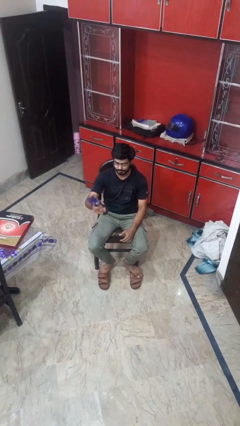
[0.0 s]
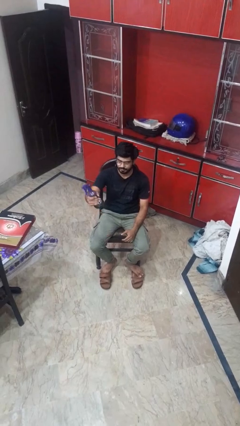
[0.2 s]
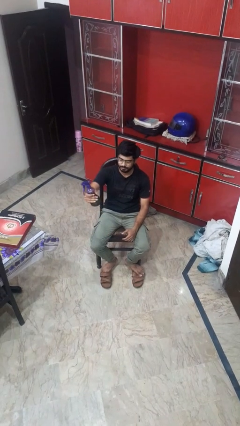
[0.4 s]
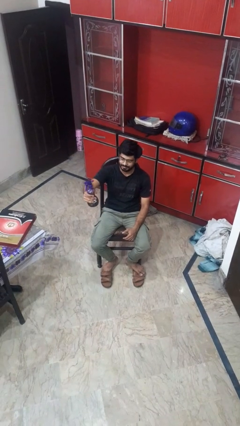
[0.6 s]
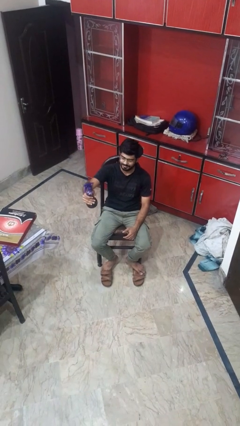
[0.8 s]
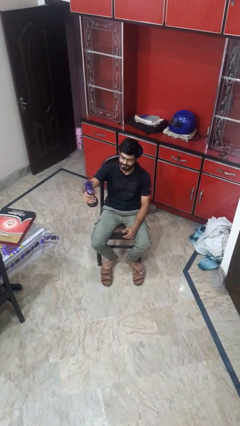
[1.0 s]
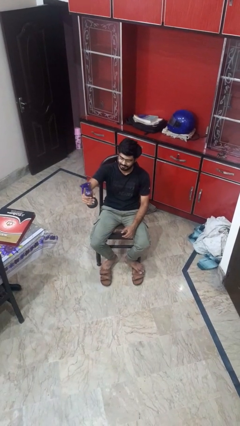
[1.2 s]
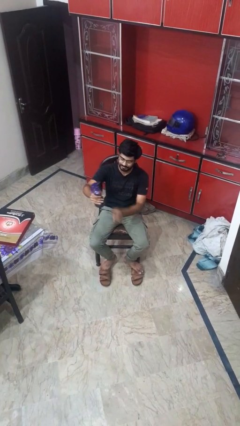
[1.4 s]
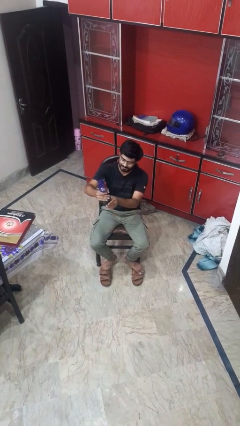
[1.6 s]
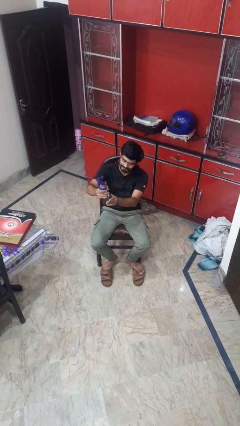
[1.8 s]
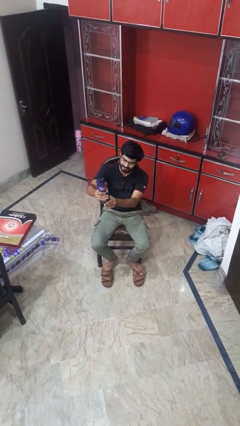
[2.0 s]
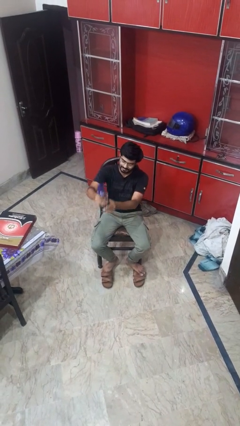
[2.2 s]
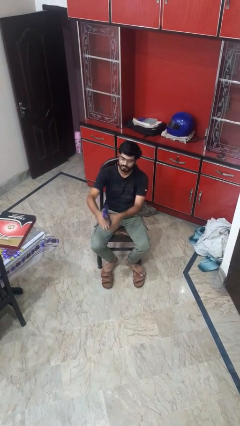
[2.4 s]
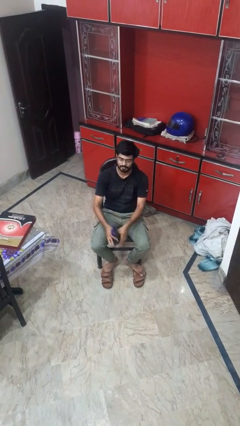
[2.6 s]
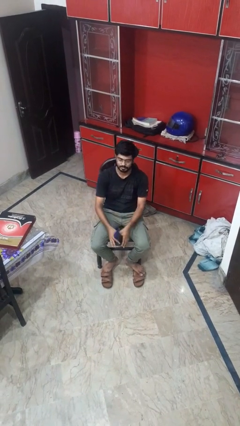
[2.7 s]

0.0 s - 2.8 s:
person squeezes object

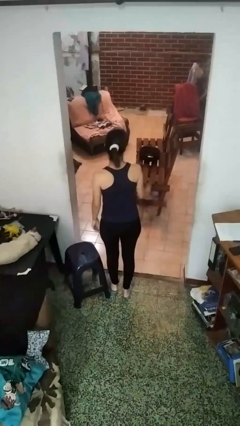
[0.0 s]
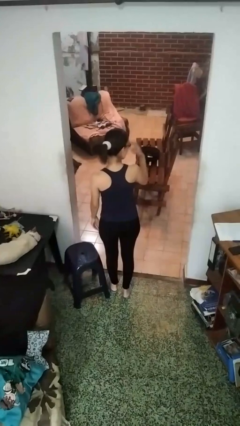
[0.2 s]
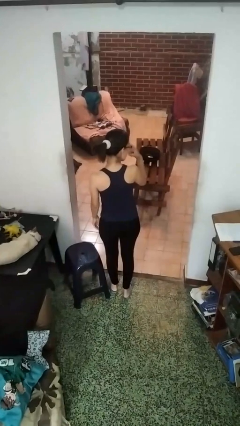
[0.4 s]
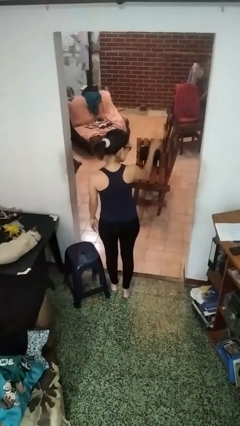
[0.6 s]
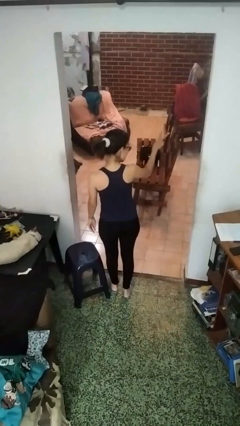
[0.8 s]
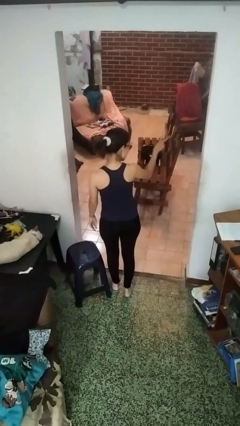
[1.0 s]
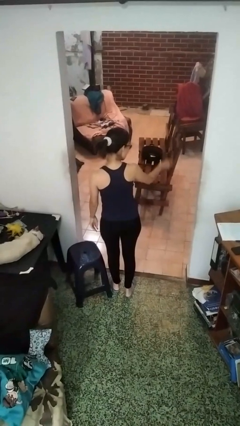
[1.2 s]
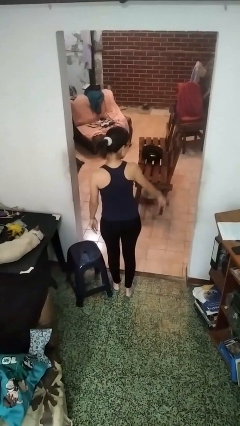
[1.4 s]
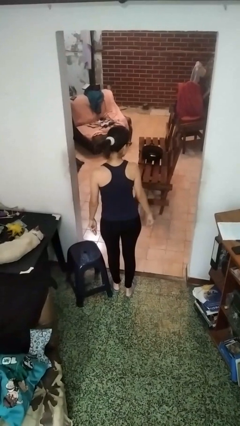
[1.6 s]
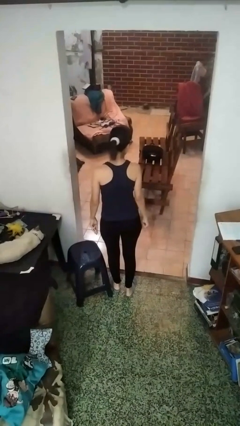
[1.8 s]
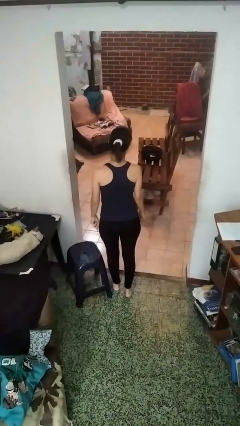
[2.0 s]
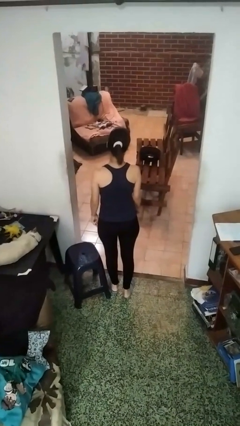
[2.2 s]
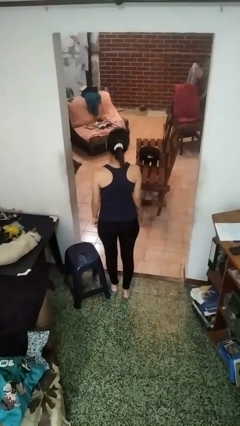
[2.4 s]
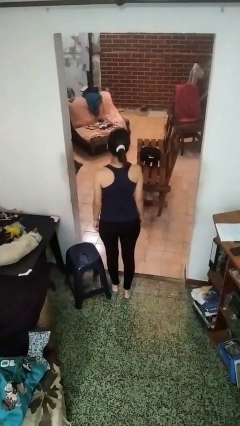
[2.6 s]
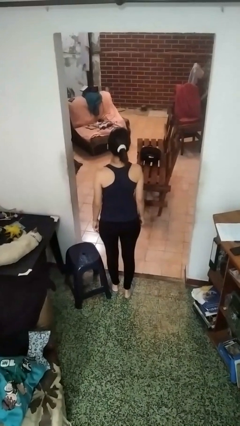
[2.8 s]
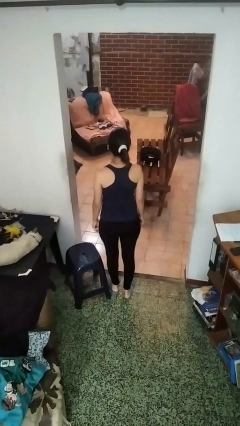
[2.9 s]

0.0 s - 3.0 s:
person gestures watch closely

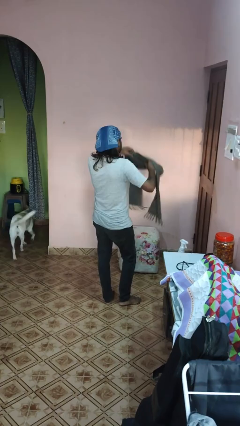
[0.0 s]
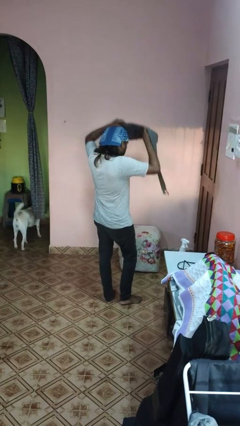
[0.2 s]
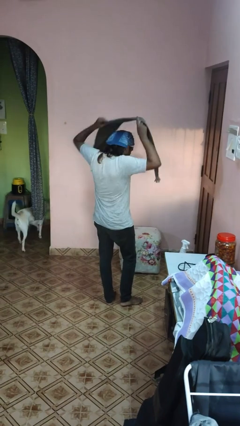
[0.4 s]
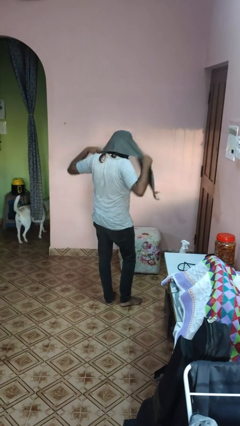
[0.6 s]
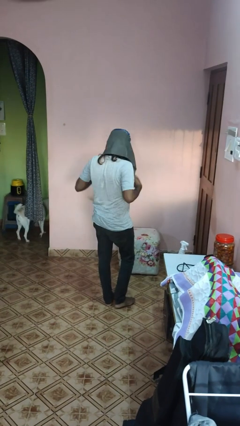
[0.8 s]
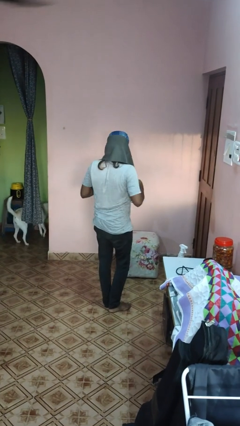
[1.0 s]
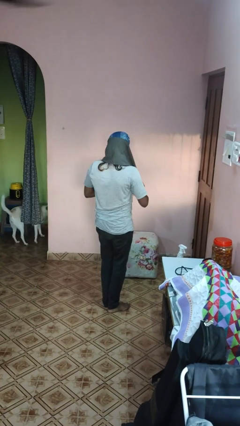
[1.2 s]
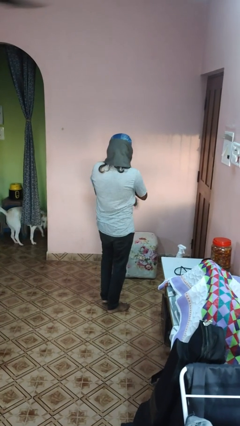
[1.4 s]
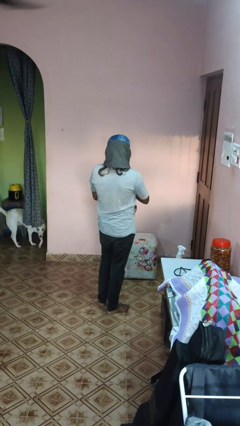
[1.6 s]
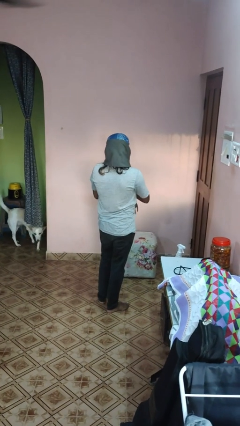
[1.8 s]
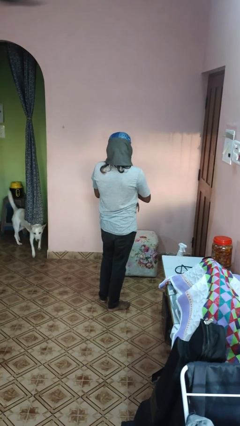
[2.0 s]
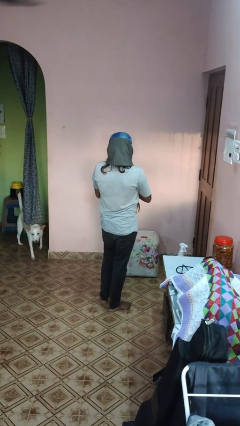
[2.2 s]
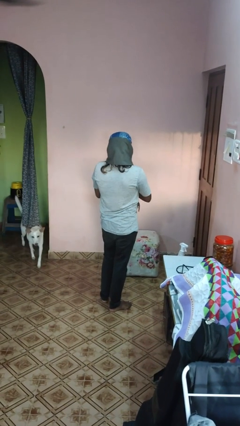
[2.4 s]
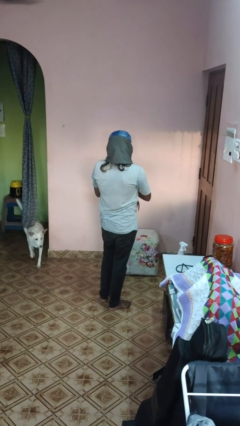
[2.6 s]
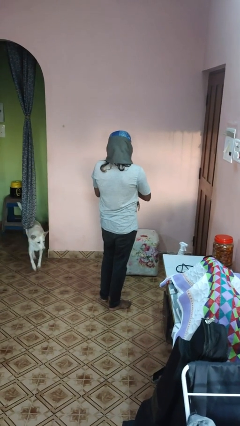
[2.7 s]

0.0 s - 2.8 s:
person puts on scarf

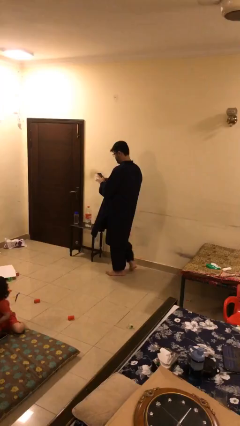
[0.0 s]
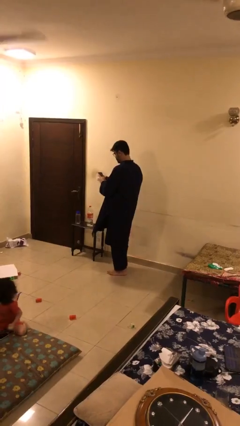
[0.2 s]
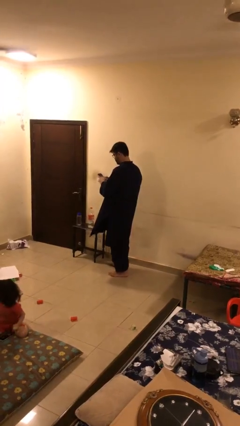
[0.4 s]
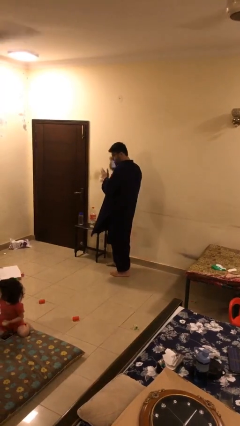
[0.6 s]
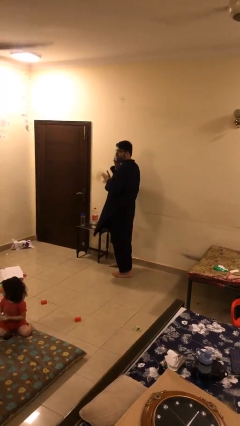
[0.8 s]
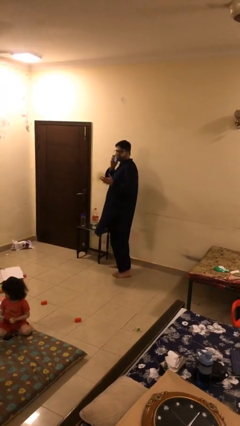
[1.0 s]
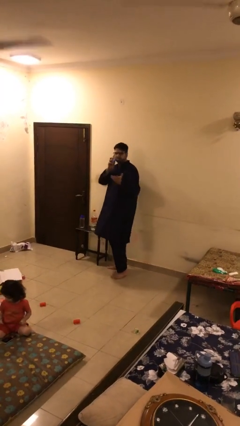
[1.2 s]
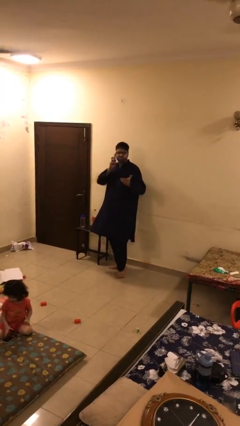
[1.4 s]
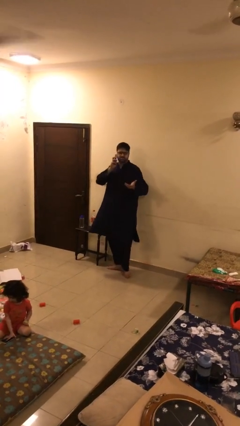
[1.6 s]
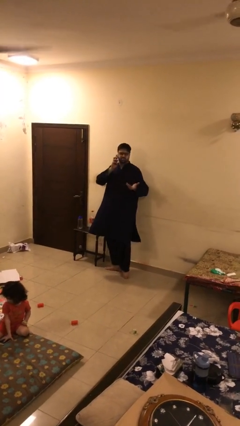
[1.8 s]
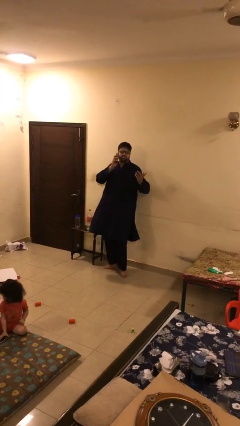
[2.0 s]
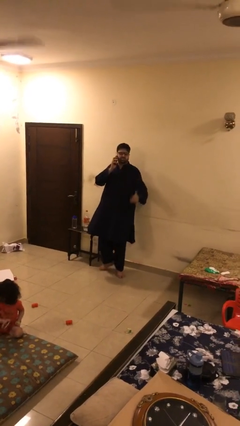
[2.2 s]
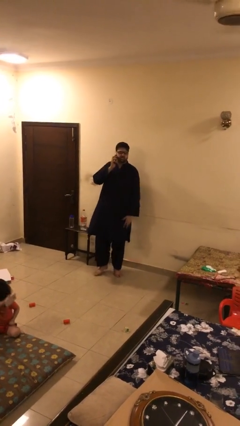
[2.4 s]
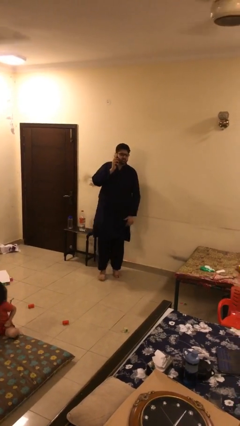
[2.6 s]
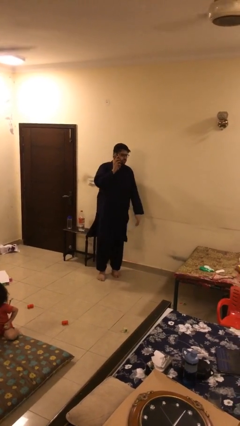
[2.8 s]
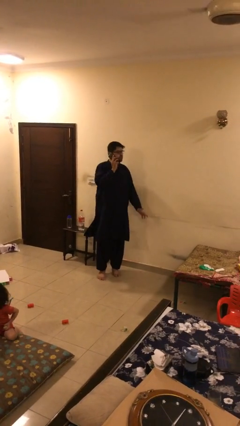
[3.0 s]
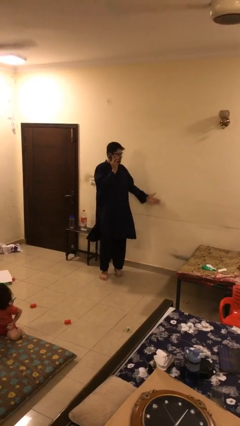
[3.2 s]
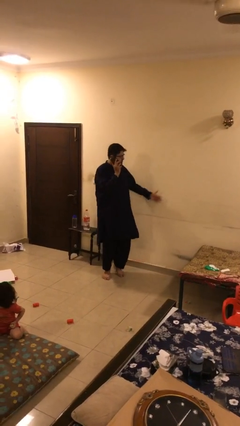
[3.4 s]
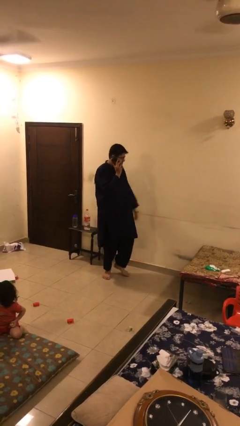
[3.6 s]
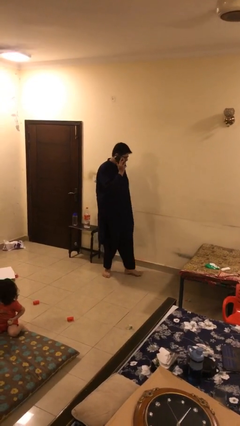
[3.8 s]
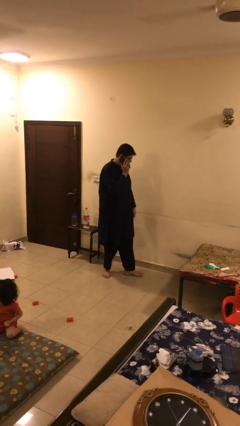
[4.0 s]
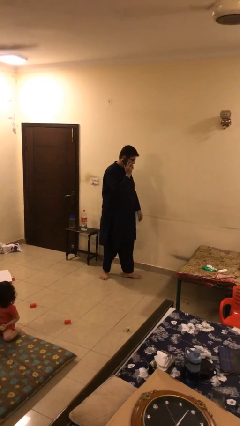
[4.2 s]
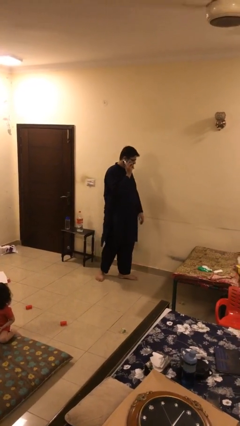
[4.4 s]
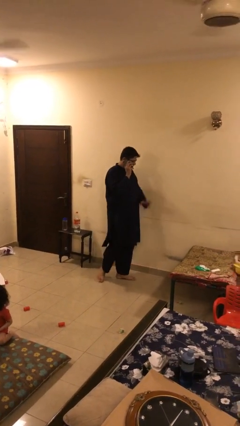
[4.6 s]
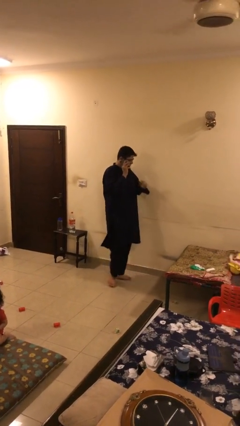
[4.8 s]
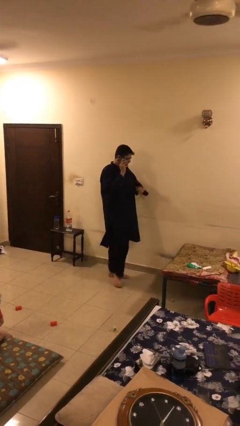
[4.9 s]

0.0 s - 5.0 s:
person talks on phone

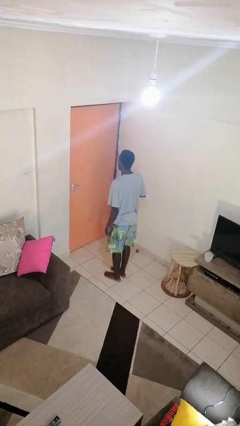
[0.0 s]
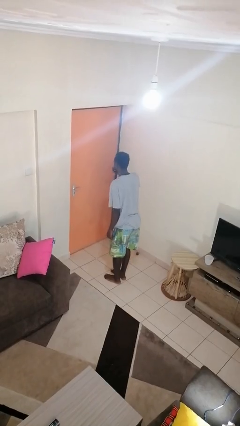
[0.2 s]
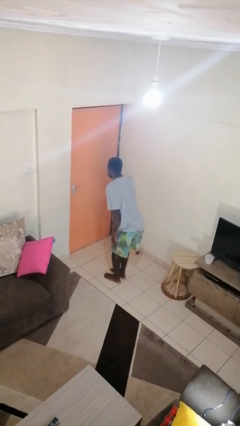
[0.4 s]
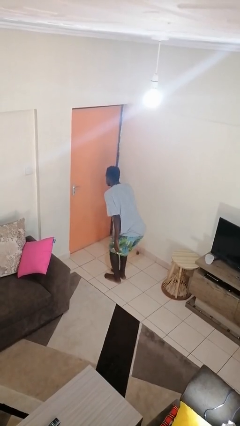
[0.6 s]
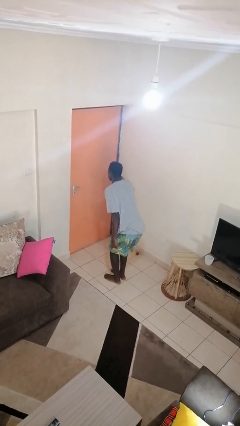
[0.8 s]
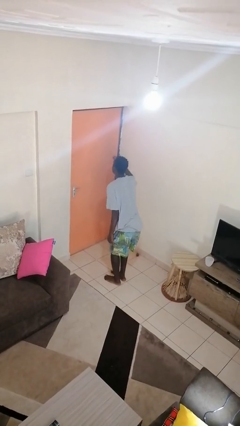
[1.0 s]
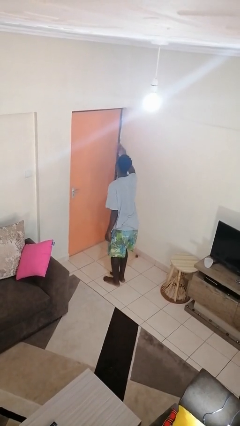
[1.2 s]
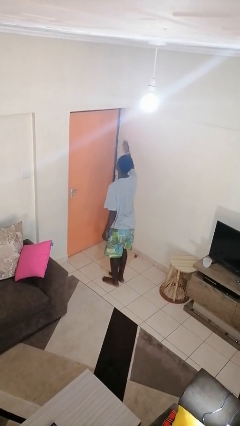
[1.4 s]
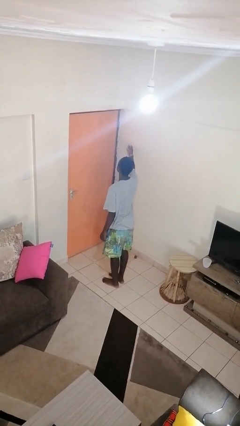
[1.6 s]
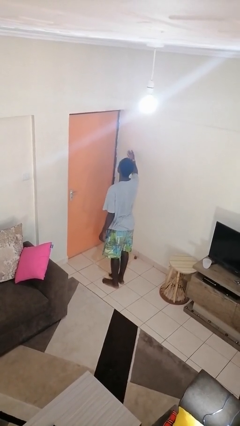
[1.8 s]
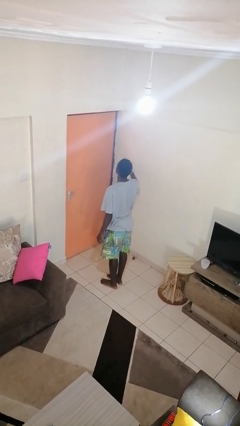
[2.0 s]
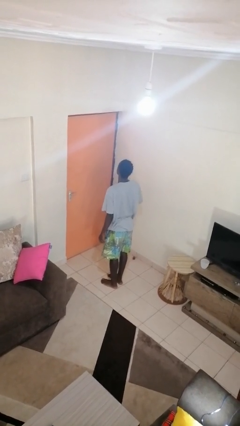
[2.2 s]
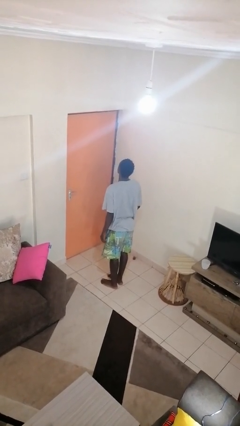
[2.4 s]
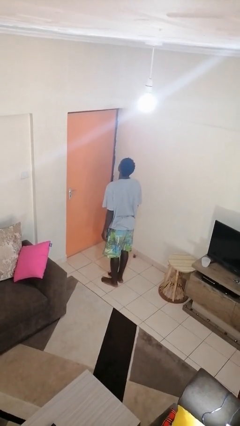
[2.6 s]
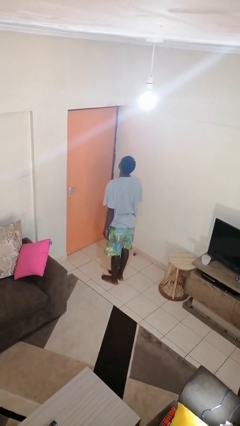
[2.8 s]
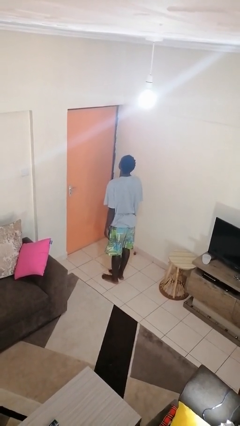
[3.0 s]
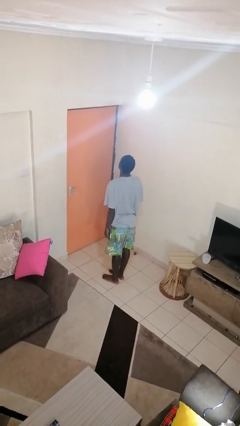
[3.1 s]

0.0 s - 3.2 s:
person gestures blow kiss

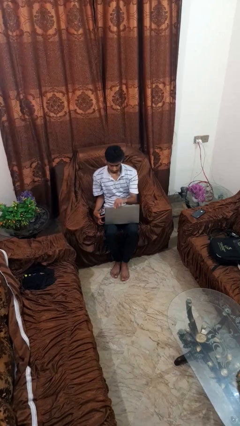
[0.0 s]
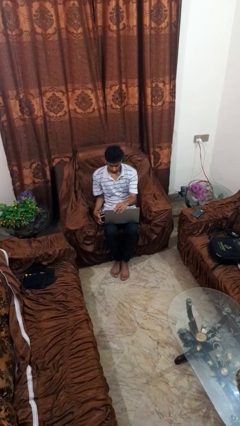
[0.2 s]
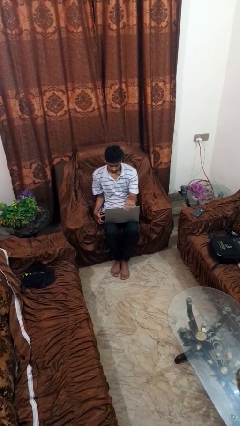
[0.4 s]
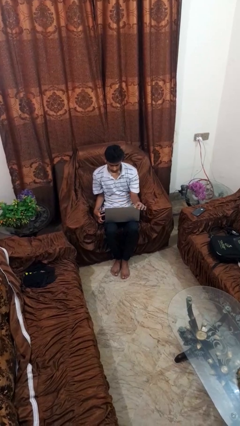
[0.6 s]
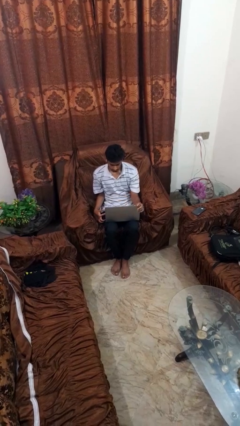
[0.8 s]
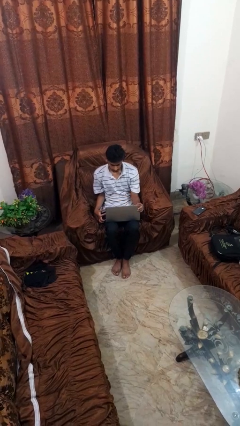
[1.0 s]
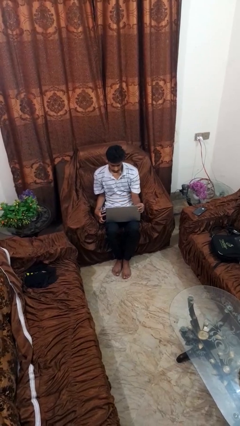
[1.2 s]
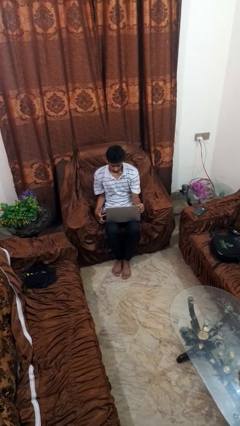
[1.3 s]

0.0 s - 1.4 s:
person opens laptop
